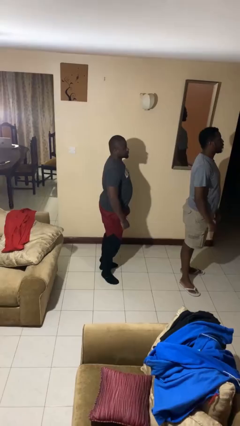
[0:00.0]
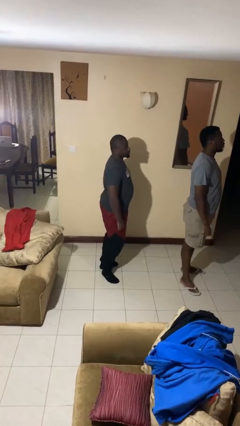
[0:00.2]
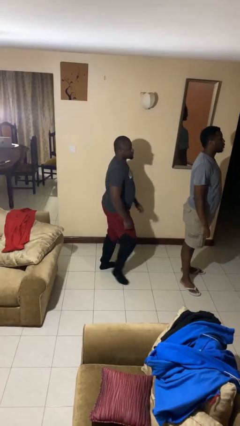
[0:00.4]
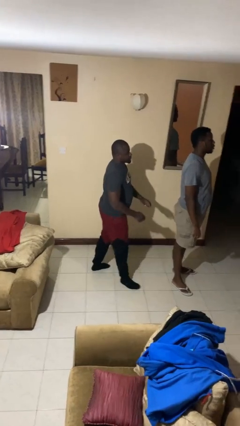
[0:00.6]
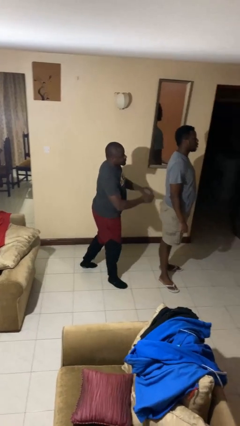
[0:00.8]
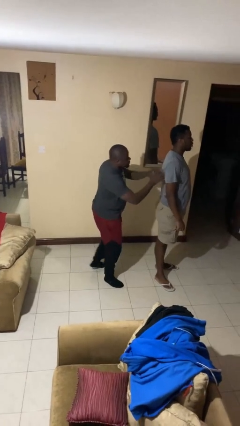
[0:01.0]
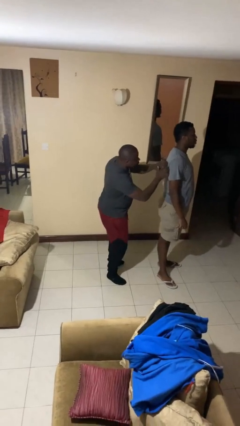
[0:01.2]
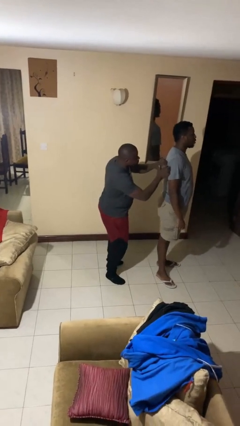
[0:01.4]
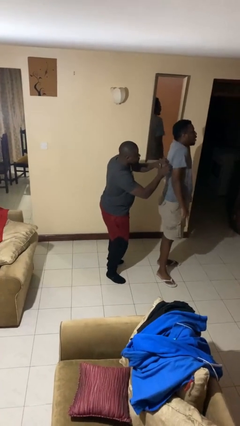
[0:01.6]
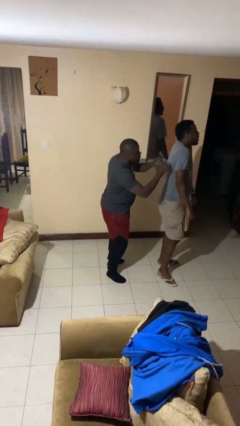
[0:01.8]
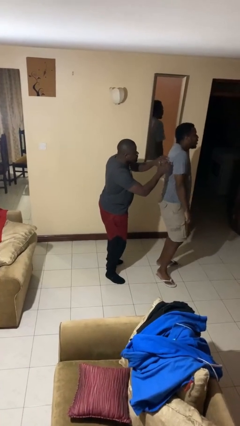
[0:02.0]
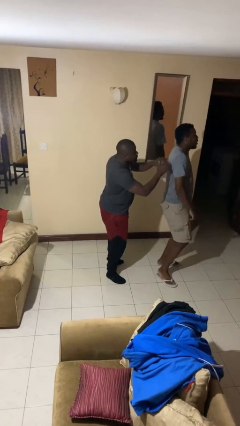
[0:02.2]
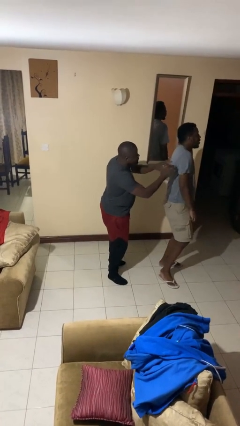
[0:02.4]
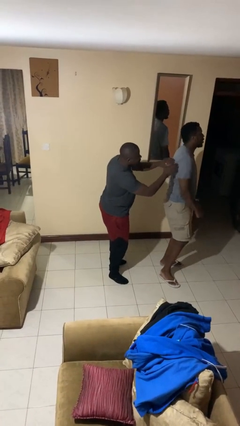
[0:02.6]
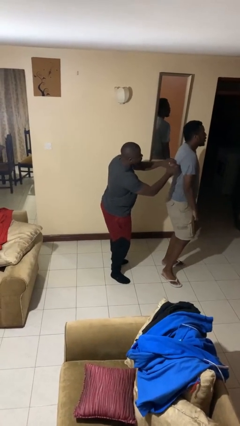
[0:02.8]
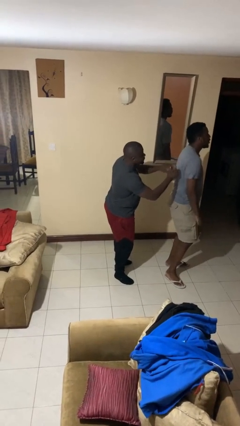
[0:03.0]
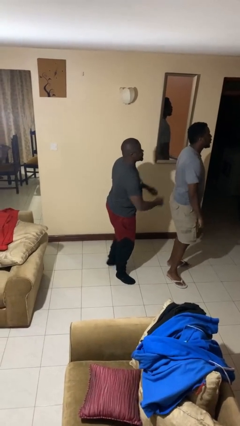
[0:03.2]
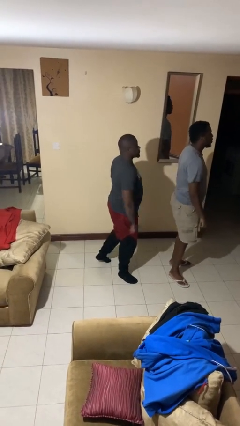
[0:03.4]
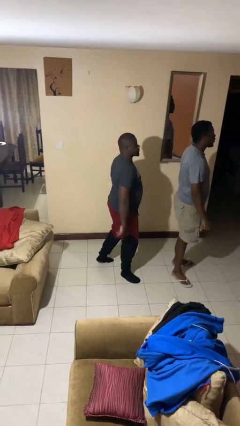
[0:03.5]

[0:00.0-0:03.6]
person tickles person

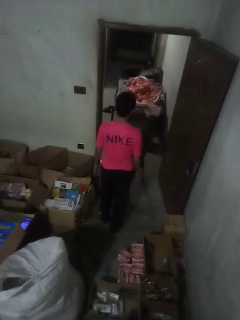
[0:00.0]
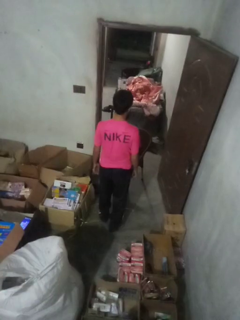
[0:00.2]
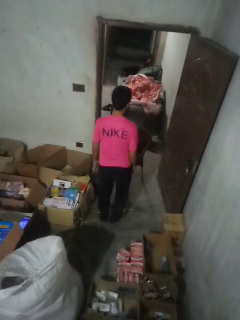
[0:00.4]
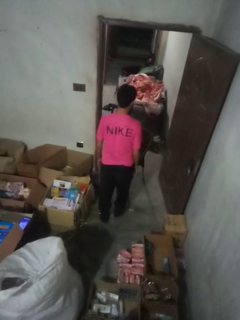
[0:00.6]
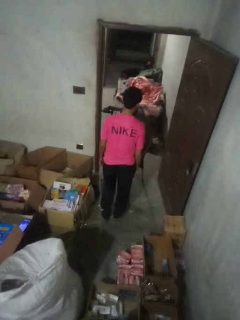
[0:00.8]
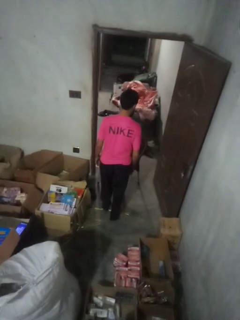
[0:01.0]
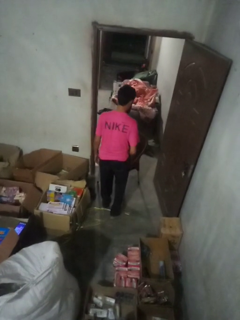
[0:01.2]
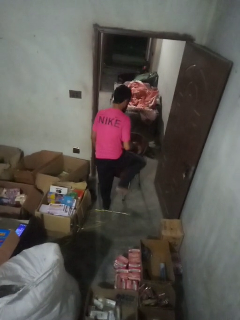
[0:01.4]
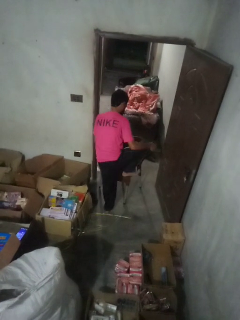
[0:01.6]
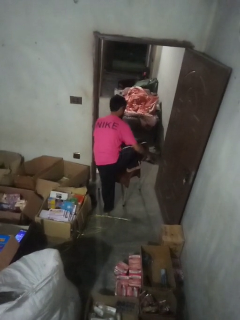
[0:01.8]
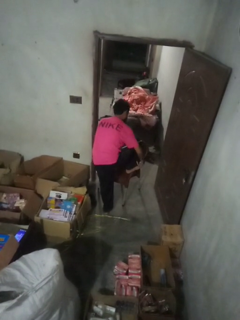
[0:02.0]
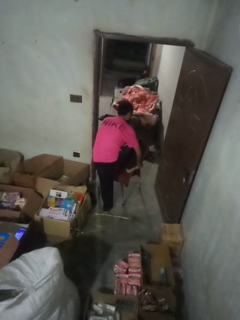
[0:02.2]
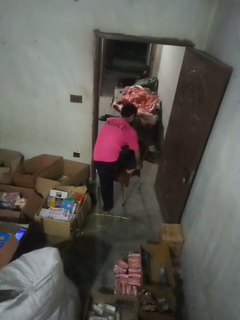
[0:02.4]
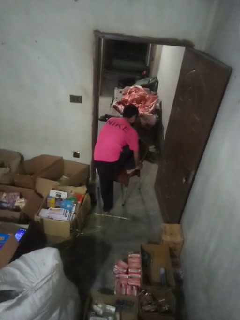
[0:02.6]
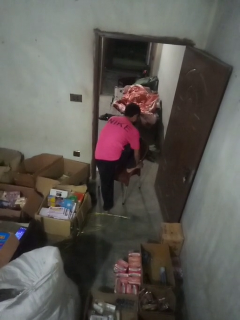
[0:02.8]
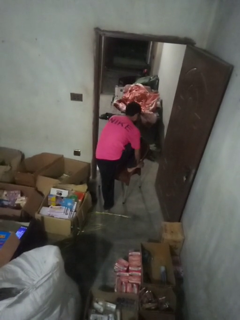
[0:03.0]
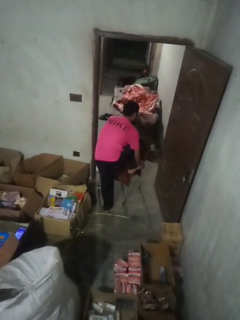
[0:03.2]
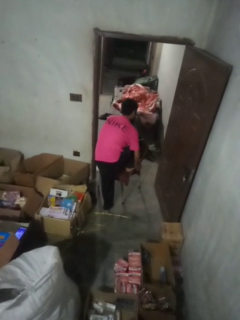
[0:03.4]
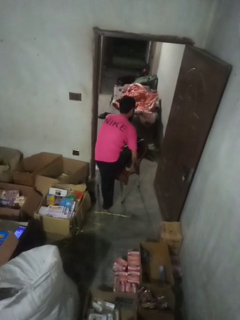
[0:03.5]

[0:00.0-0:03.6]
person stubs toe

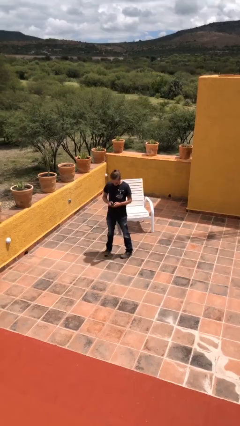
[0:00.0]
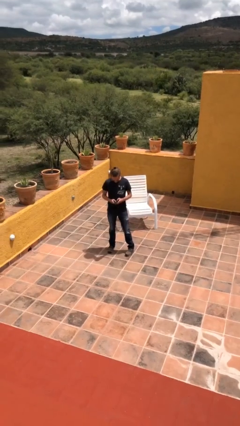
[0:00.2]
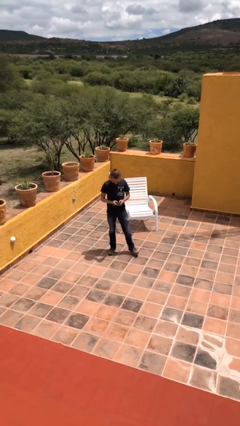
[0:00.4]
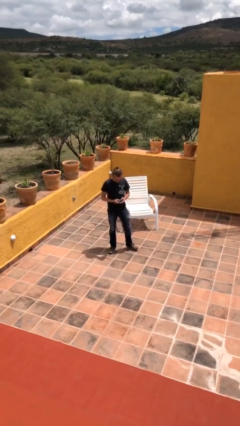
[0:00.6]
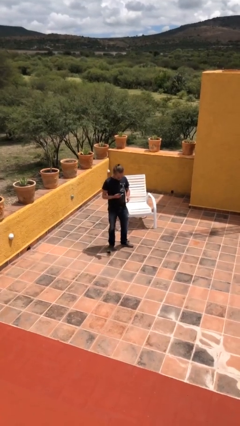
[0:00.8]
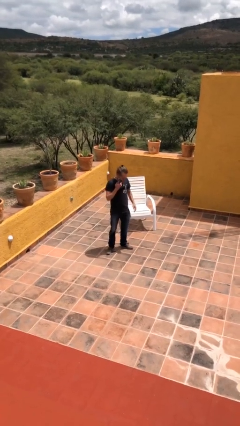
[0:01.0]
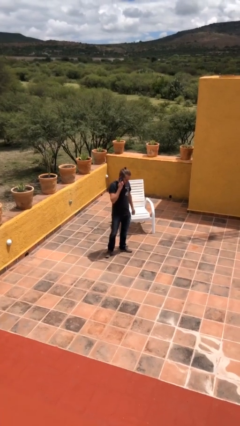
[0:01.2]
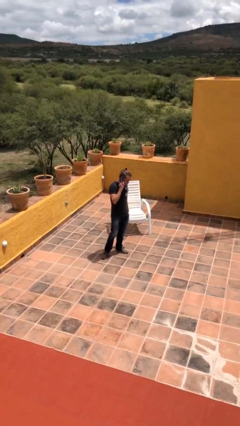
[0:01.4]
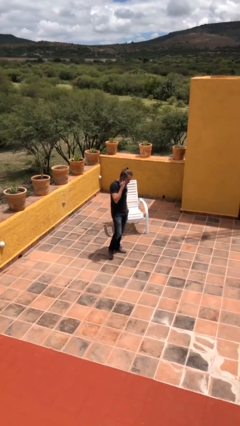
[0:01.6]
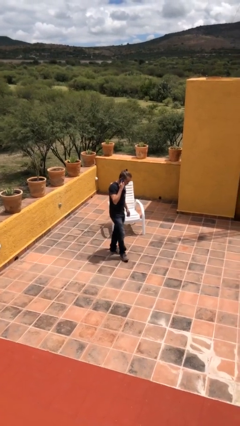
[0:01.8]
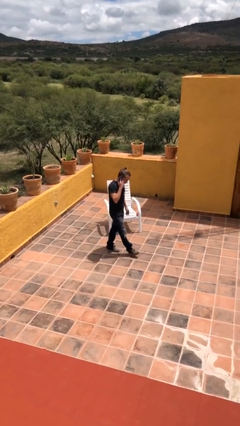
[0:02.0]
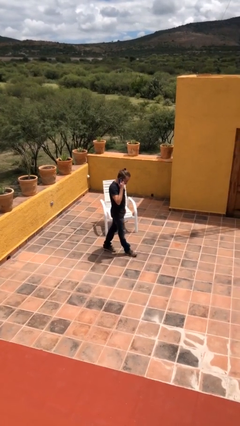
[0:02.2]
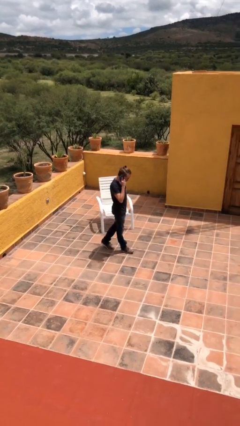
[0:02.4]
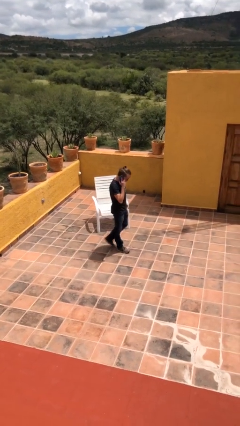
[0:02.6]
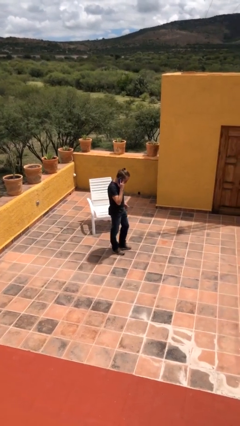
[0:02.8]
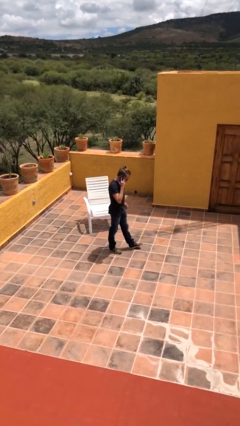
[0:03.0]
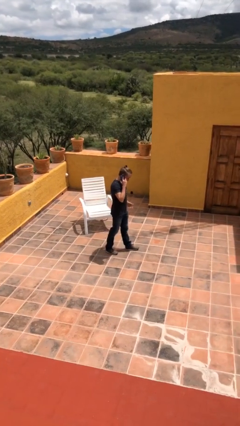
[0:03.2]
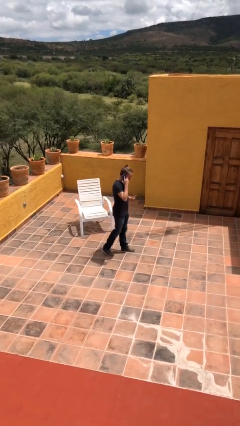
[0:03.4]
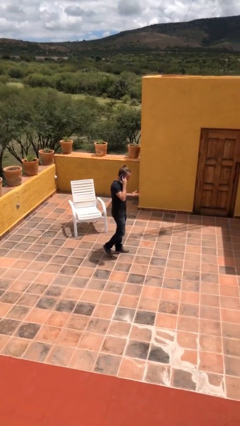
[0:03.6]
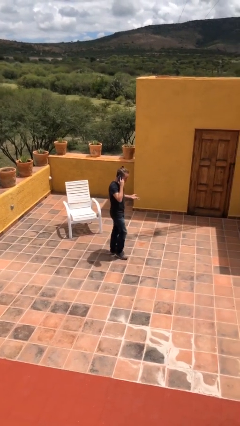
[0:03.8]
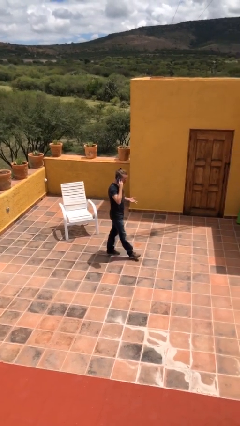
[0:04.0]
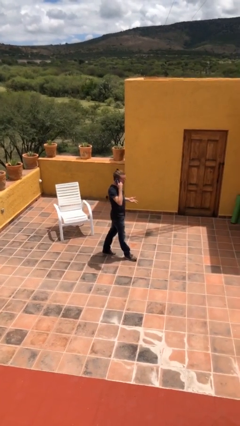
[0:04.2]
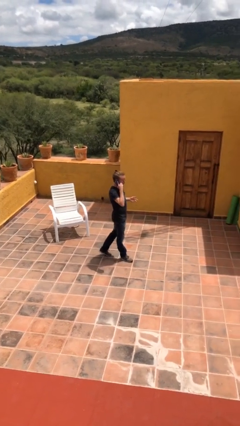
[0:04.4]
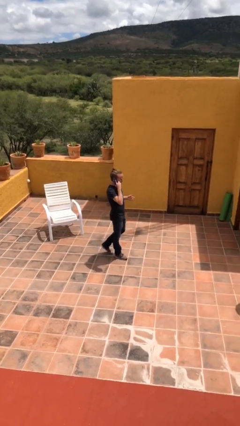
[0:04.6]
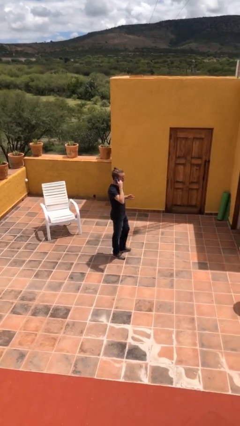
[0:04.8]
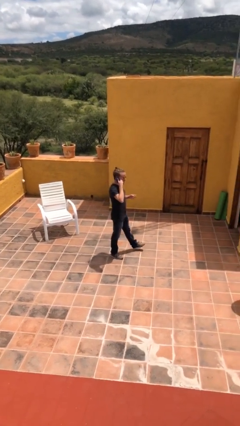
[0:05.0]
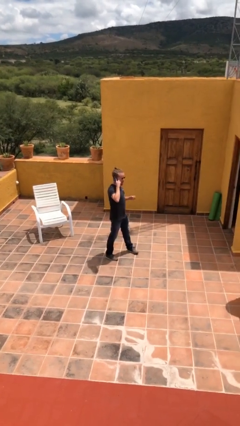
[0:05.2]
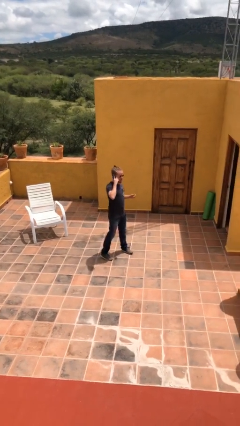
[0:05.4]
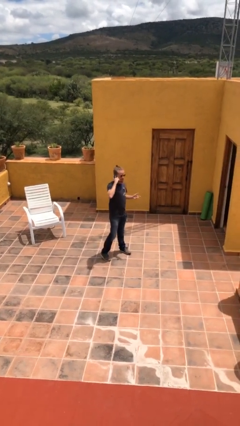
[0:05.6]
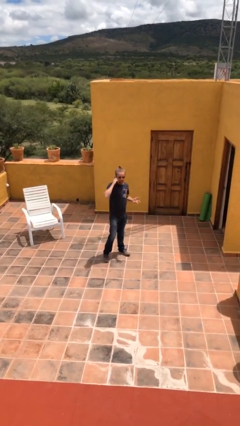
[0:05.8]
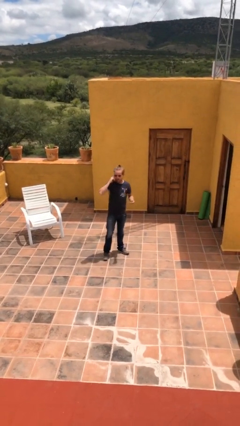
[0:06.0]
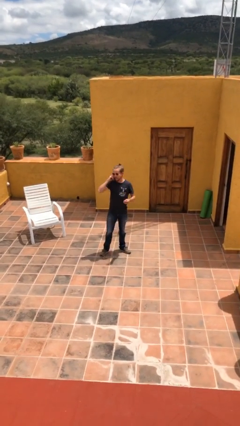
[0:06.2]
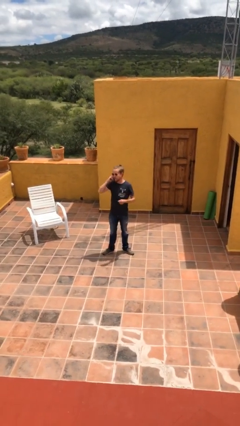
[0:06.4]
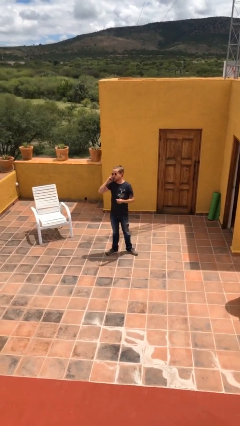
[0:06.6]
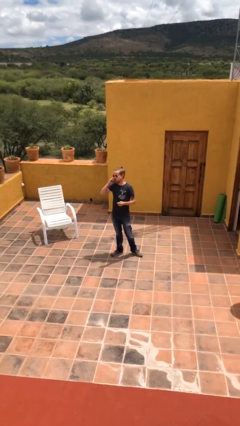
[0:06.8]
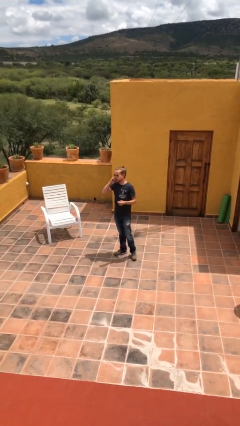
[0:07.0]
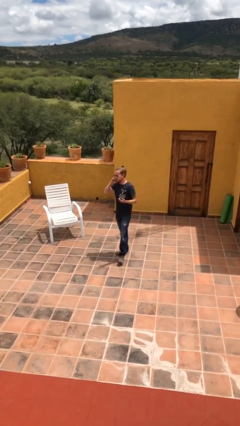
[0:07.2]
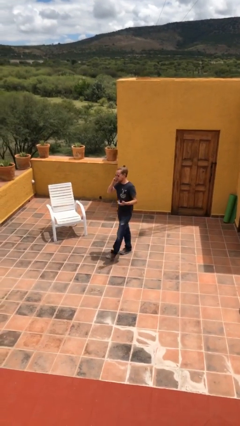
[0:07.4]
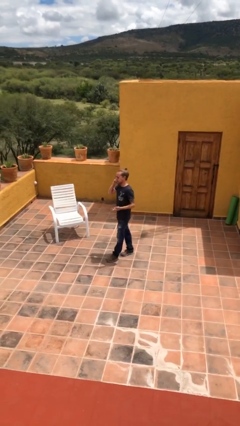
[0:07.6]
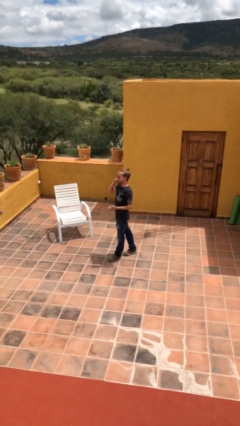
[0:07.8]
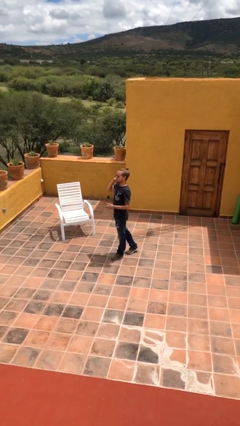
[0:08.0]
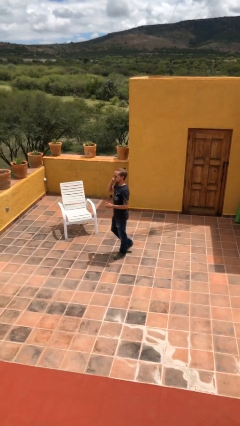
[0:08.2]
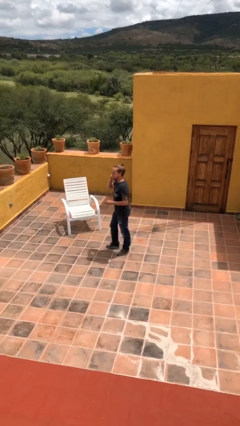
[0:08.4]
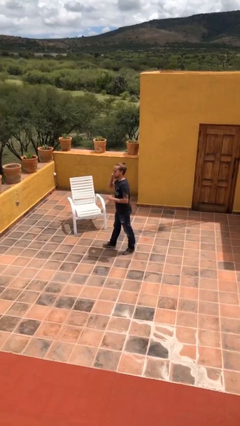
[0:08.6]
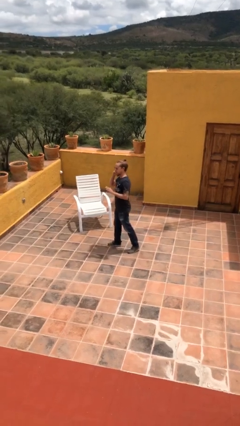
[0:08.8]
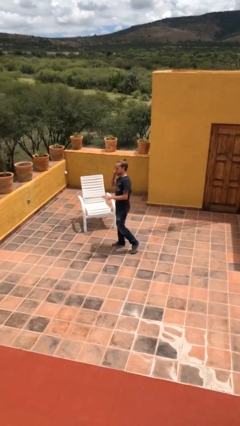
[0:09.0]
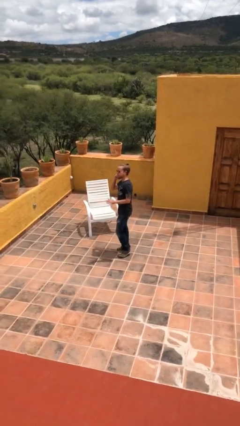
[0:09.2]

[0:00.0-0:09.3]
person talks on phone

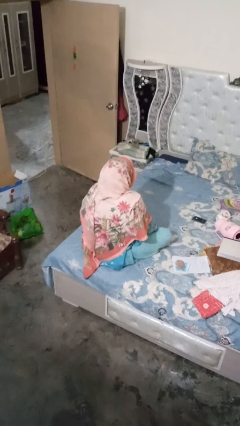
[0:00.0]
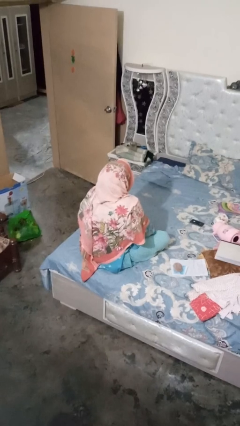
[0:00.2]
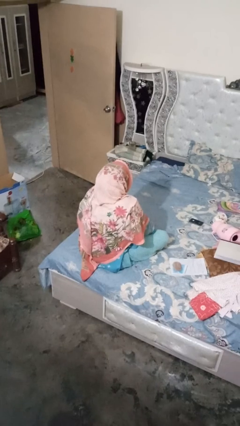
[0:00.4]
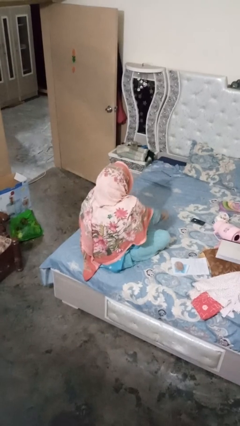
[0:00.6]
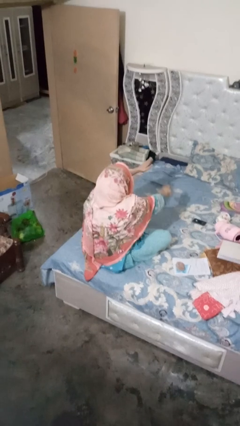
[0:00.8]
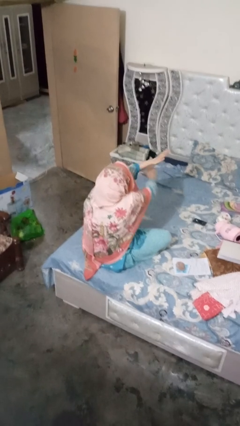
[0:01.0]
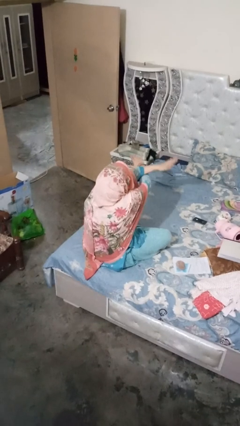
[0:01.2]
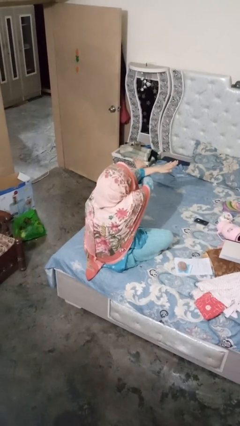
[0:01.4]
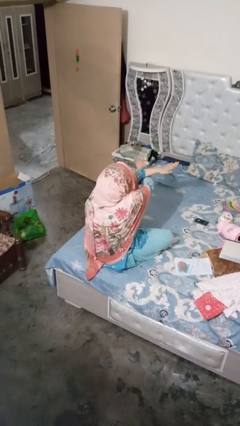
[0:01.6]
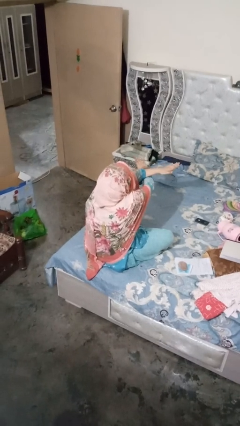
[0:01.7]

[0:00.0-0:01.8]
person gestures arms x

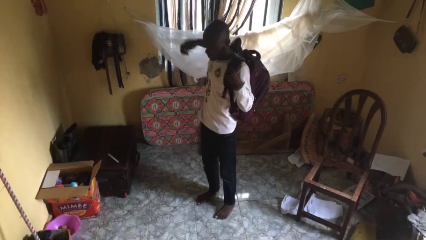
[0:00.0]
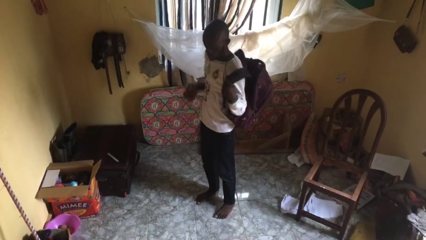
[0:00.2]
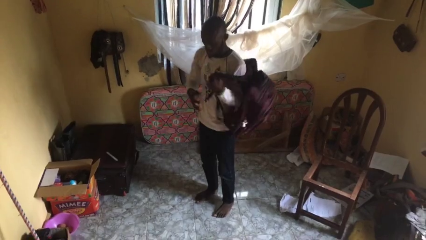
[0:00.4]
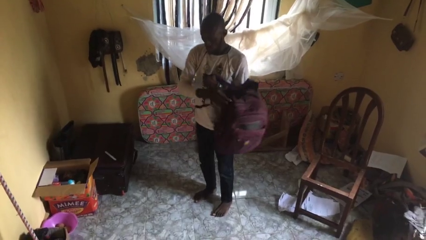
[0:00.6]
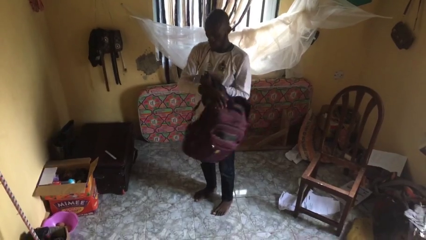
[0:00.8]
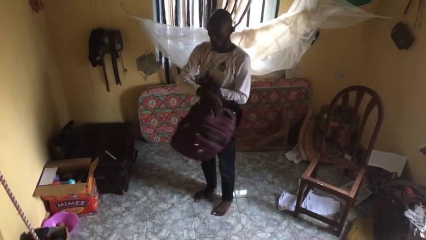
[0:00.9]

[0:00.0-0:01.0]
person takes off backpack
